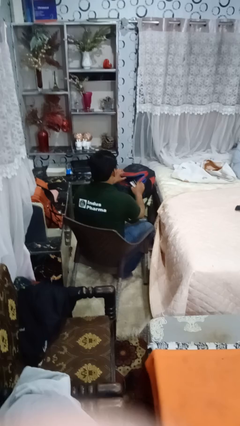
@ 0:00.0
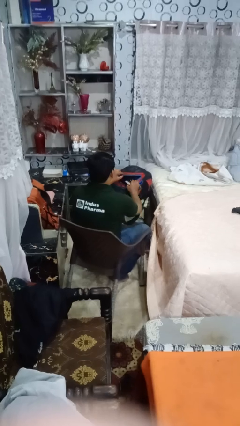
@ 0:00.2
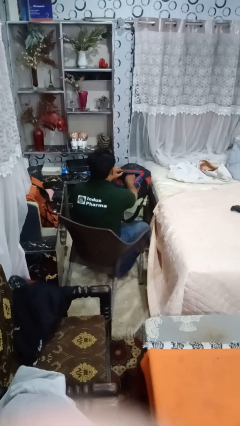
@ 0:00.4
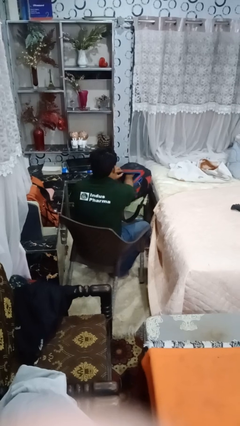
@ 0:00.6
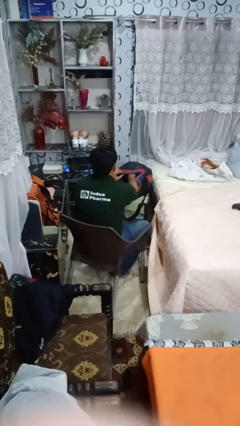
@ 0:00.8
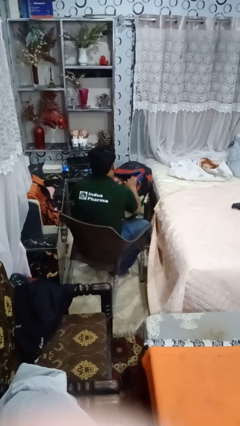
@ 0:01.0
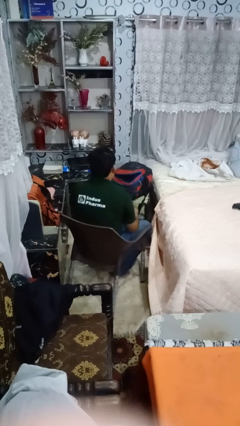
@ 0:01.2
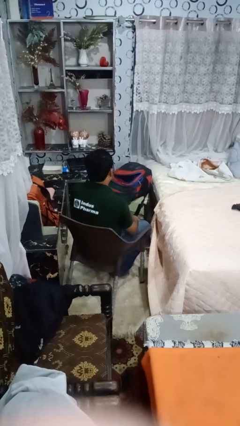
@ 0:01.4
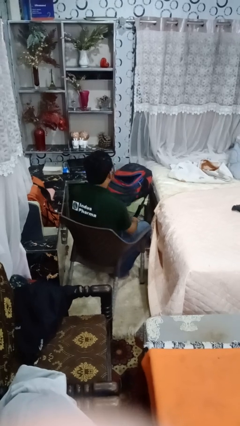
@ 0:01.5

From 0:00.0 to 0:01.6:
person puts object into backpack

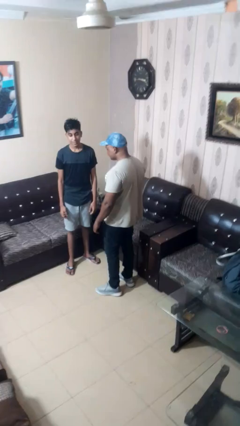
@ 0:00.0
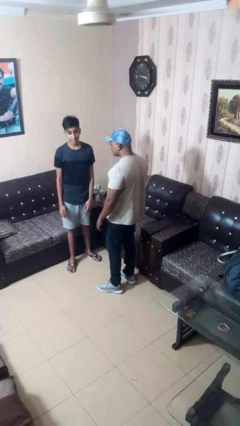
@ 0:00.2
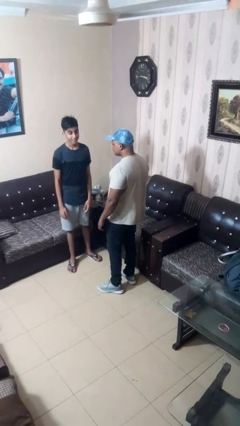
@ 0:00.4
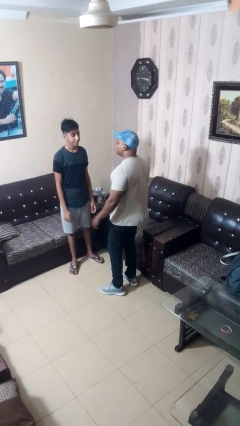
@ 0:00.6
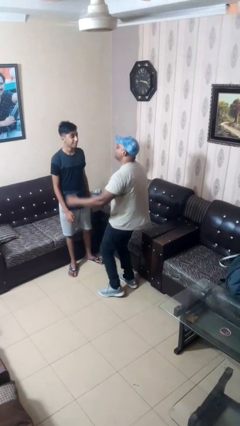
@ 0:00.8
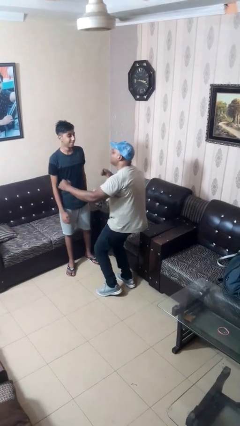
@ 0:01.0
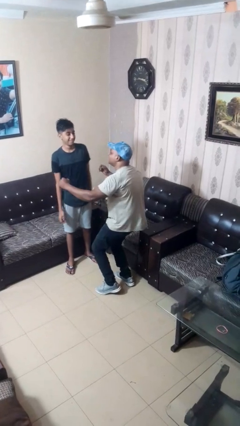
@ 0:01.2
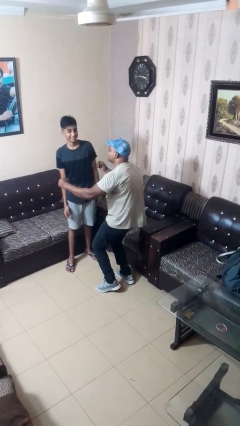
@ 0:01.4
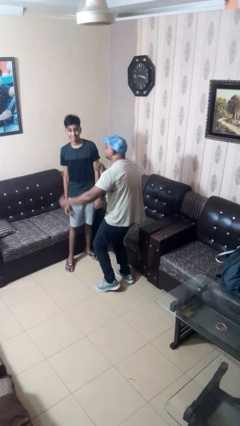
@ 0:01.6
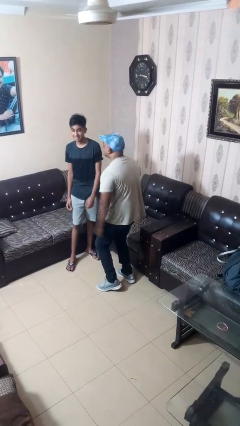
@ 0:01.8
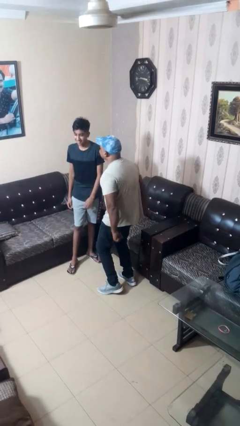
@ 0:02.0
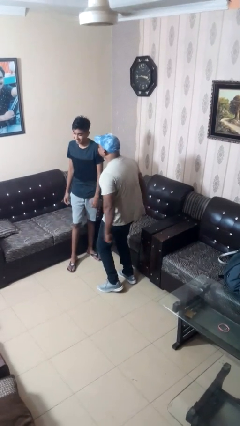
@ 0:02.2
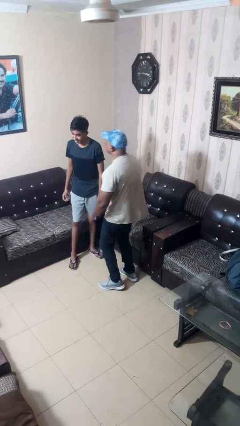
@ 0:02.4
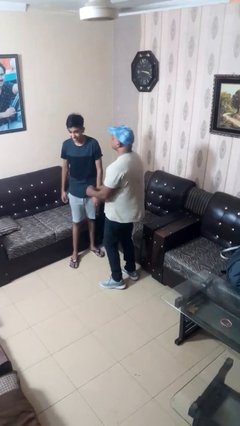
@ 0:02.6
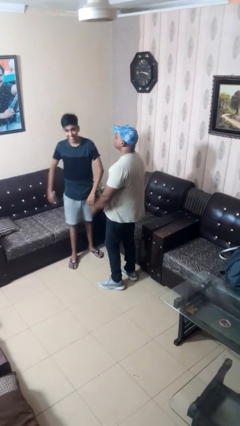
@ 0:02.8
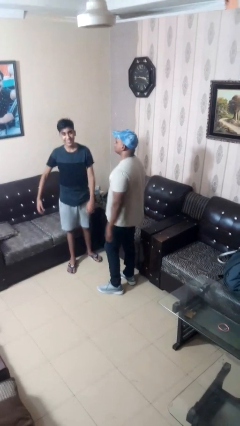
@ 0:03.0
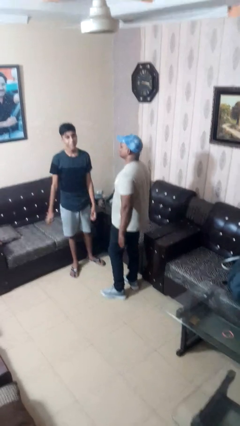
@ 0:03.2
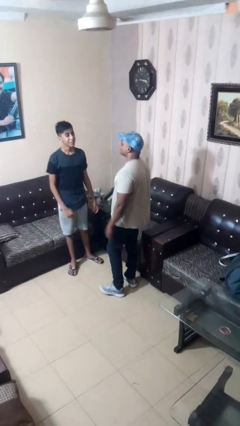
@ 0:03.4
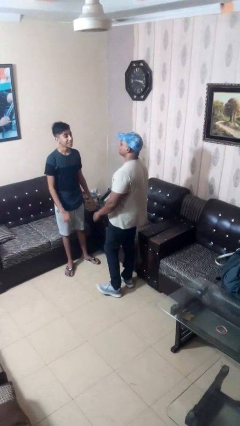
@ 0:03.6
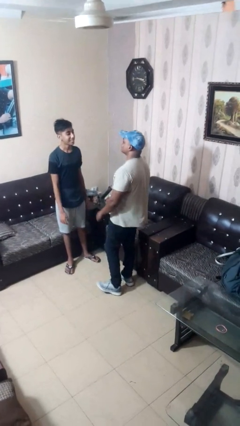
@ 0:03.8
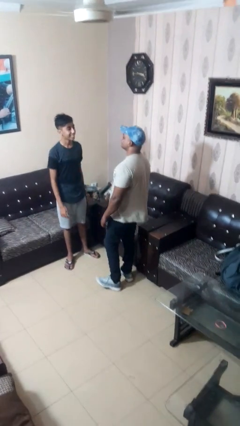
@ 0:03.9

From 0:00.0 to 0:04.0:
person laughs with person

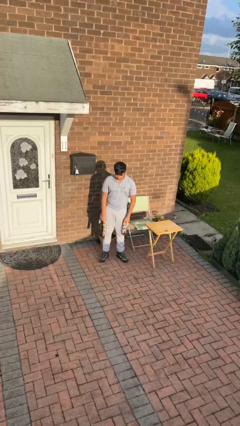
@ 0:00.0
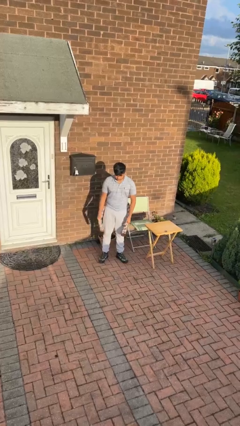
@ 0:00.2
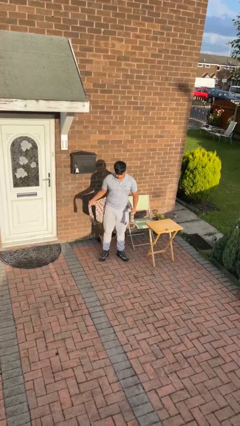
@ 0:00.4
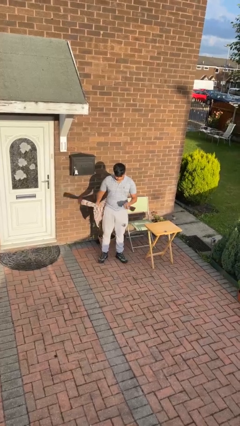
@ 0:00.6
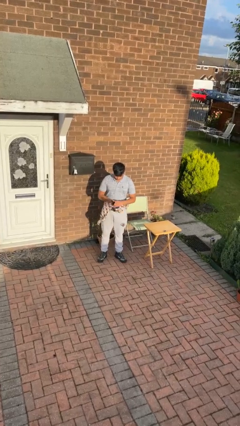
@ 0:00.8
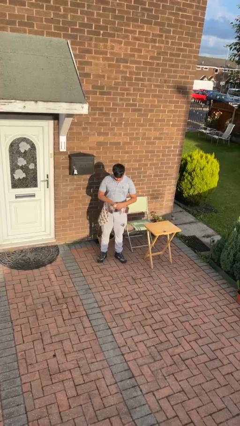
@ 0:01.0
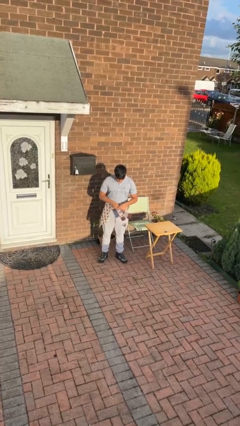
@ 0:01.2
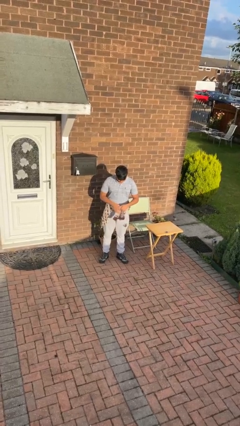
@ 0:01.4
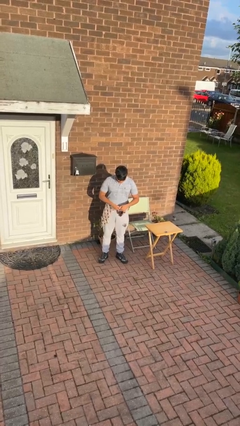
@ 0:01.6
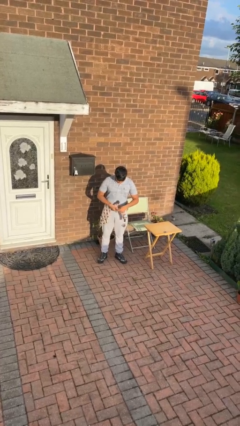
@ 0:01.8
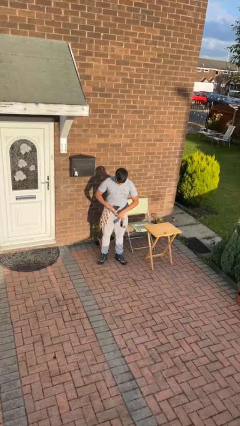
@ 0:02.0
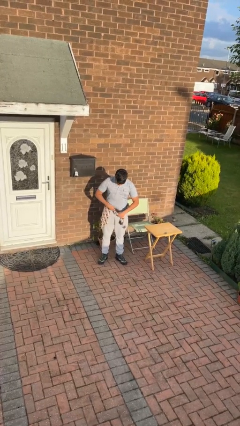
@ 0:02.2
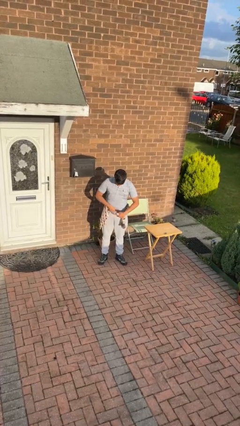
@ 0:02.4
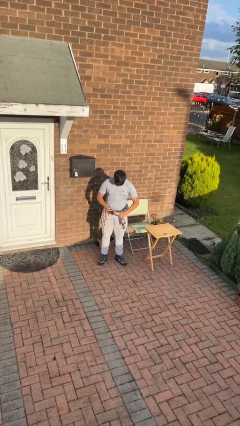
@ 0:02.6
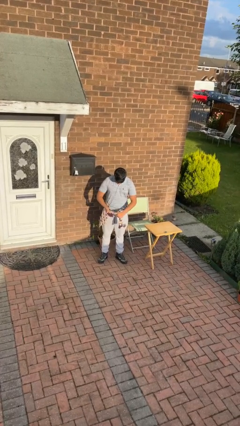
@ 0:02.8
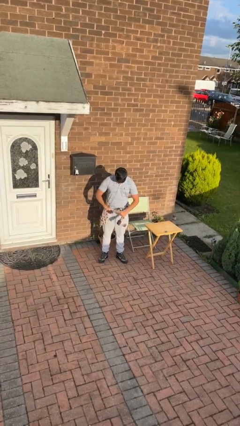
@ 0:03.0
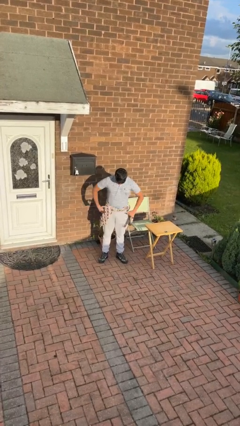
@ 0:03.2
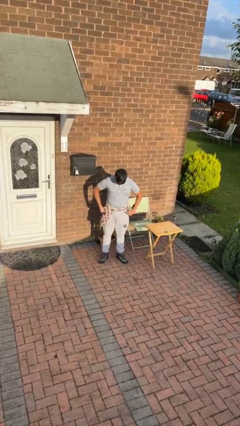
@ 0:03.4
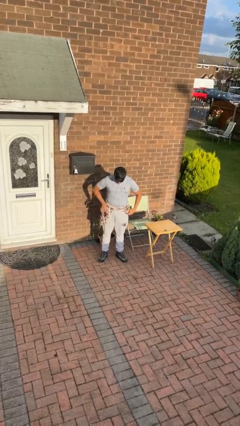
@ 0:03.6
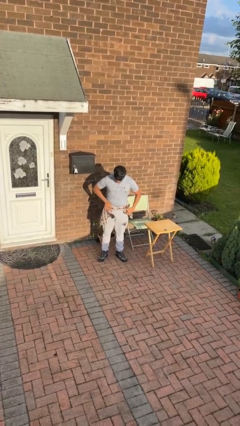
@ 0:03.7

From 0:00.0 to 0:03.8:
person ties jacket around waist

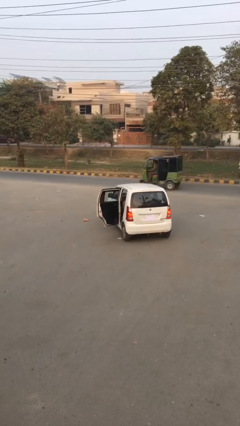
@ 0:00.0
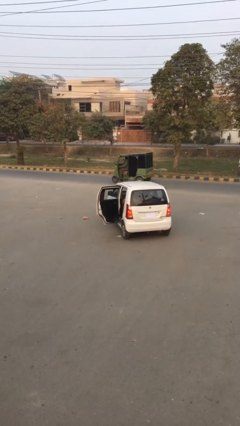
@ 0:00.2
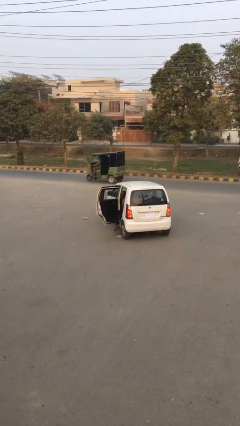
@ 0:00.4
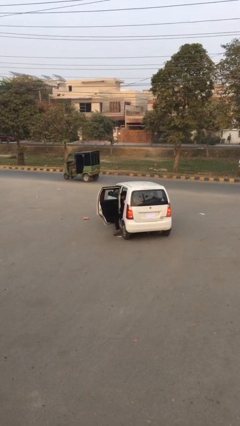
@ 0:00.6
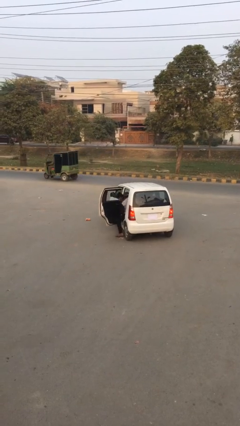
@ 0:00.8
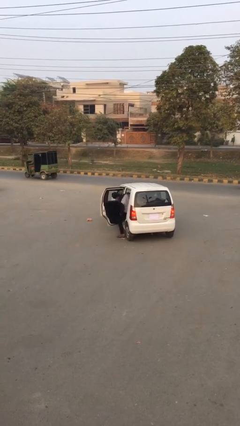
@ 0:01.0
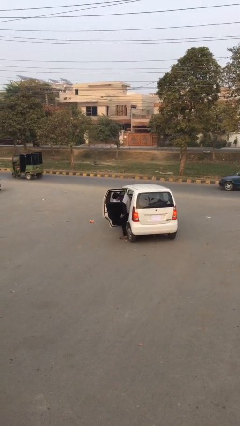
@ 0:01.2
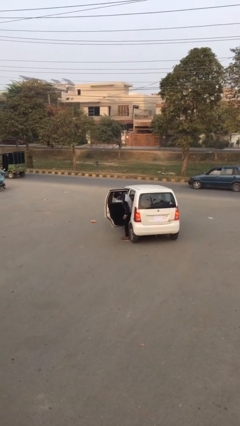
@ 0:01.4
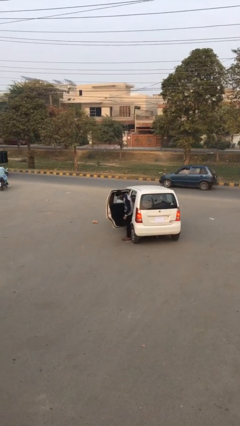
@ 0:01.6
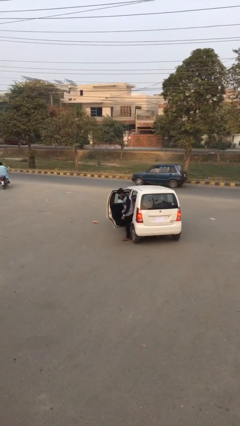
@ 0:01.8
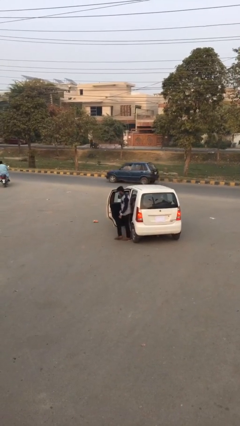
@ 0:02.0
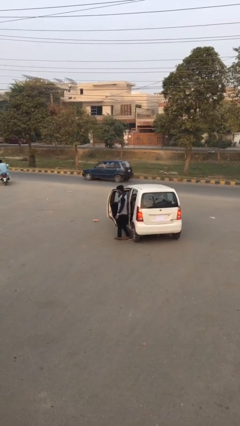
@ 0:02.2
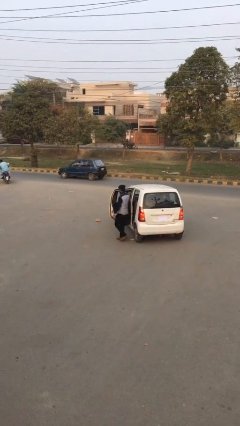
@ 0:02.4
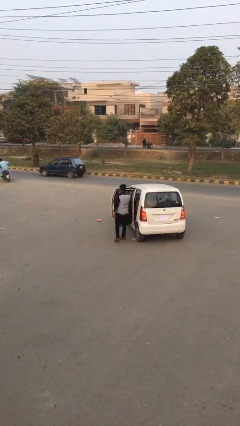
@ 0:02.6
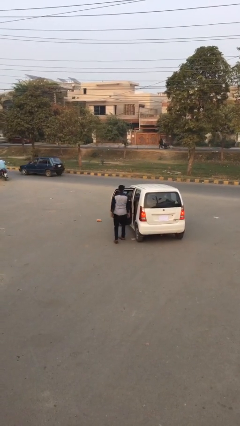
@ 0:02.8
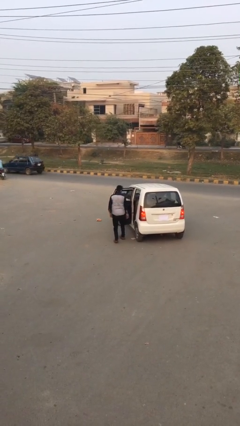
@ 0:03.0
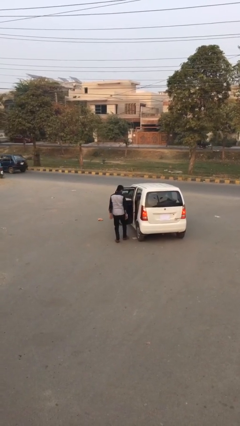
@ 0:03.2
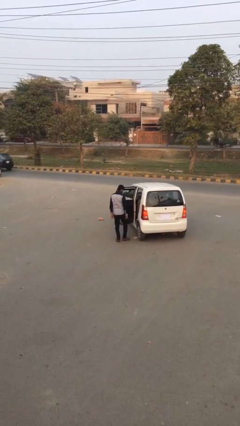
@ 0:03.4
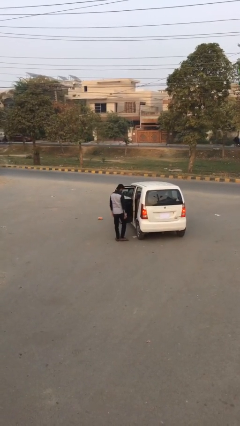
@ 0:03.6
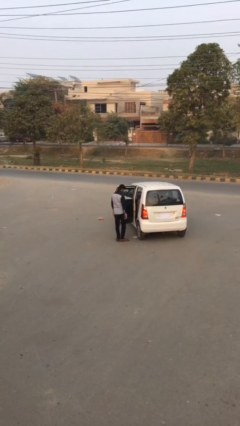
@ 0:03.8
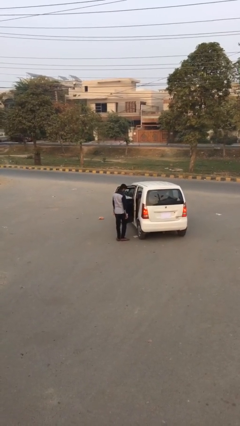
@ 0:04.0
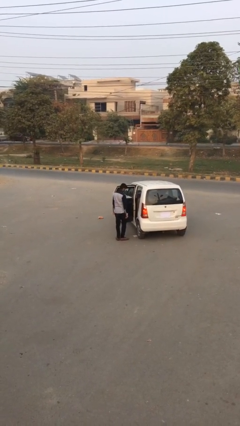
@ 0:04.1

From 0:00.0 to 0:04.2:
person exits car

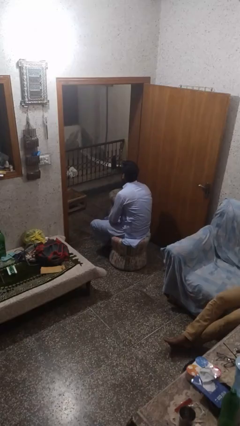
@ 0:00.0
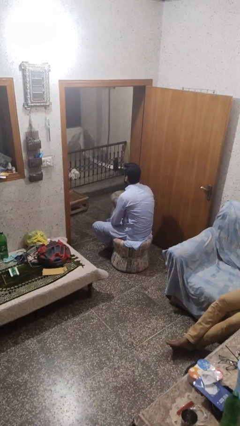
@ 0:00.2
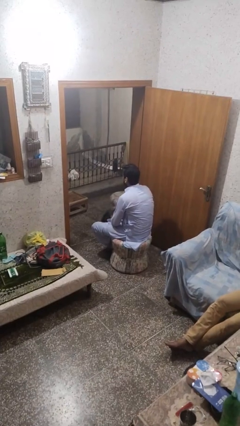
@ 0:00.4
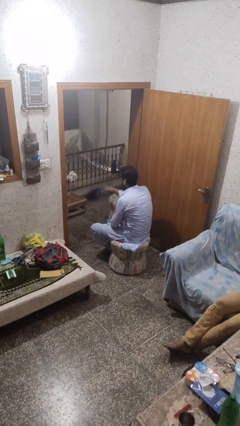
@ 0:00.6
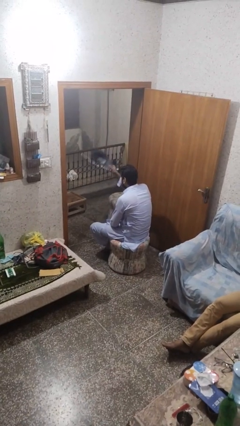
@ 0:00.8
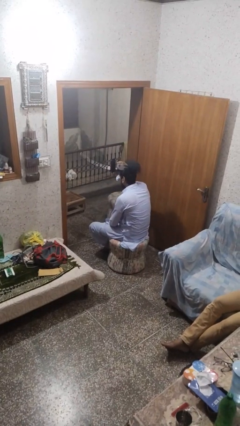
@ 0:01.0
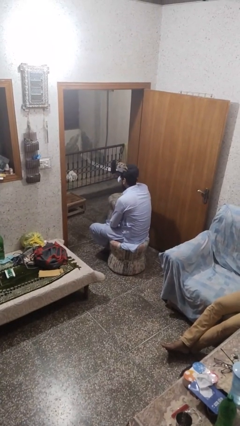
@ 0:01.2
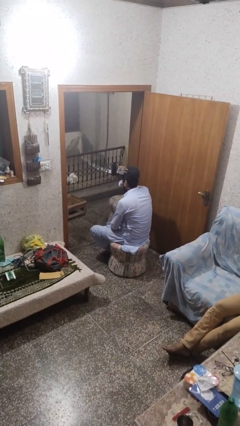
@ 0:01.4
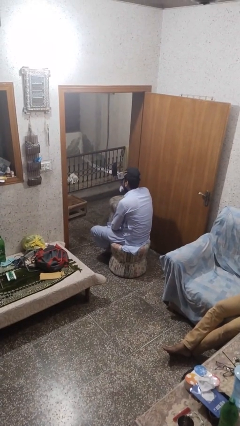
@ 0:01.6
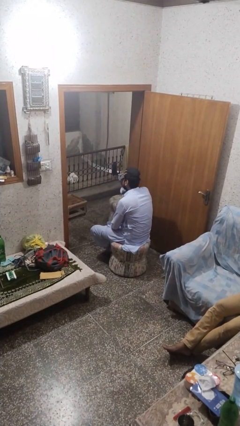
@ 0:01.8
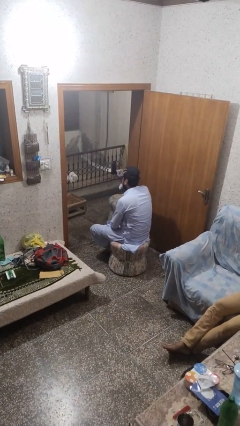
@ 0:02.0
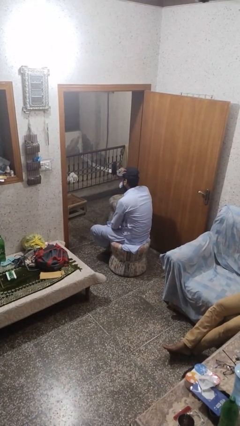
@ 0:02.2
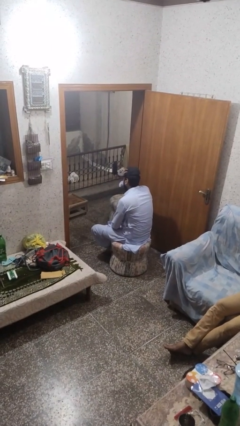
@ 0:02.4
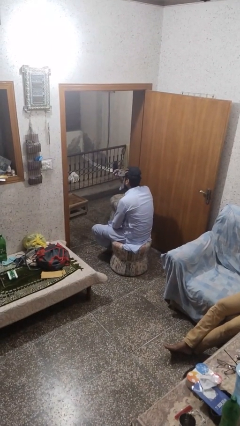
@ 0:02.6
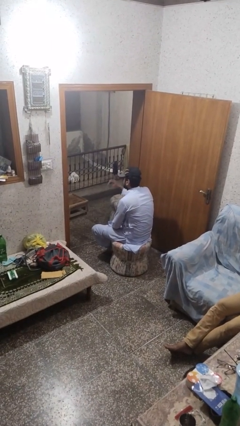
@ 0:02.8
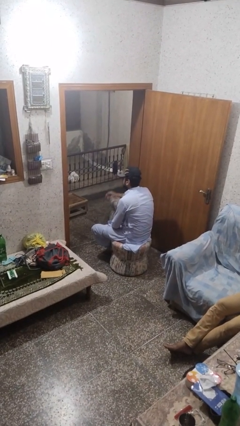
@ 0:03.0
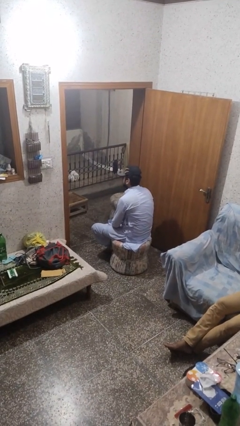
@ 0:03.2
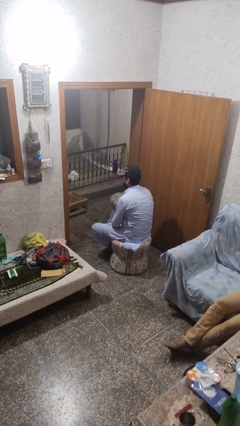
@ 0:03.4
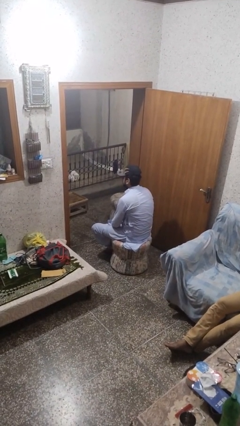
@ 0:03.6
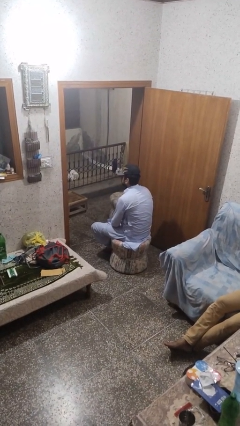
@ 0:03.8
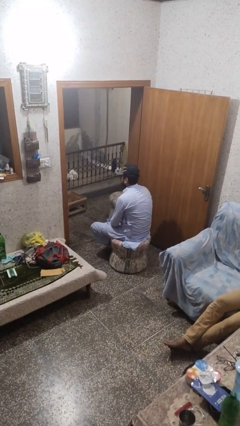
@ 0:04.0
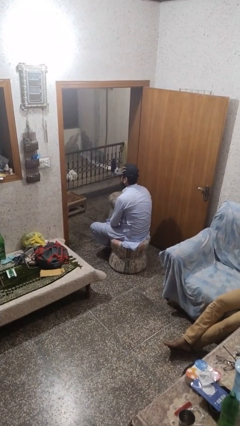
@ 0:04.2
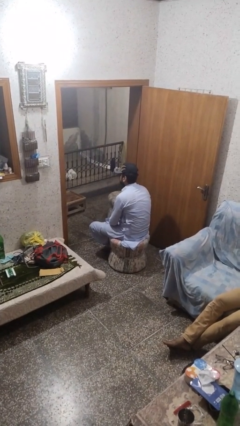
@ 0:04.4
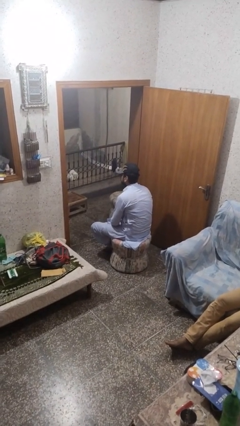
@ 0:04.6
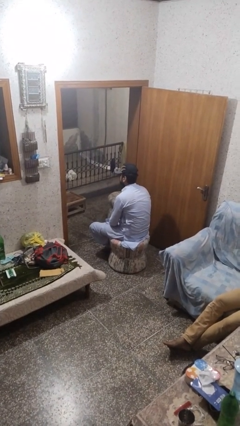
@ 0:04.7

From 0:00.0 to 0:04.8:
person puts on hat
